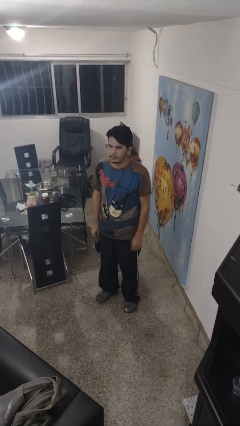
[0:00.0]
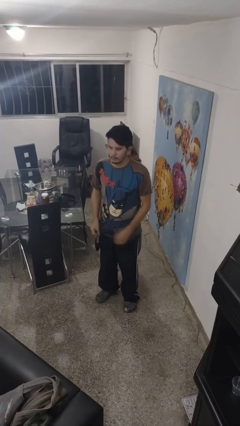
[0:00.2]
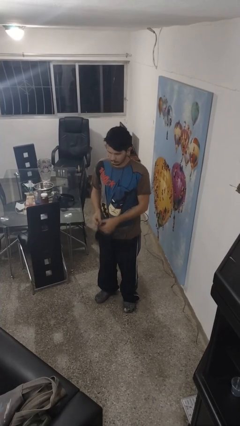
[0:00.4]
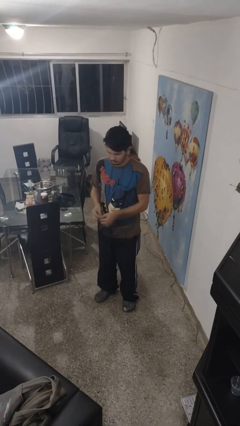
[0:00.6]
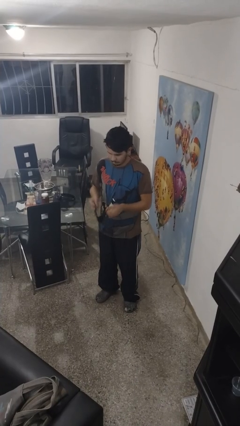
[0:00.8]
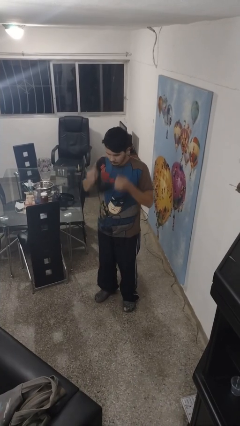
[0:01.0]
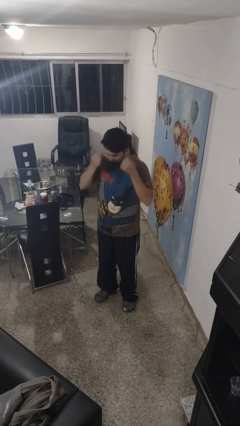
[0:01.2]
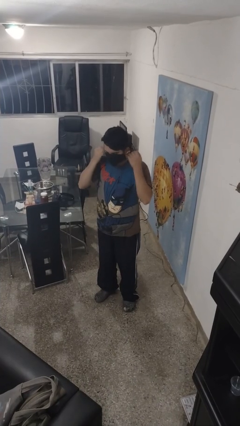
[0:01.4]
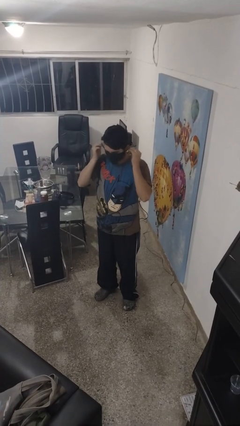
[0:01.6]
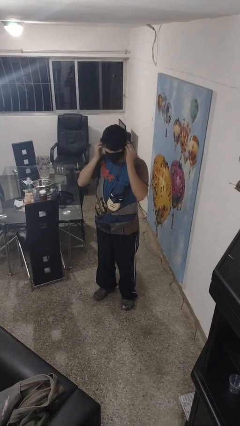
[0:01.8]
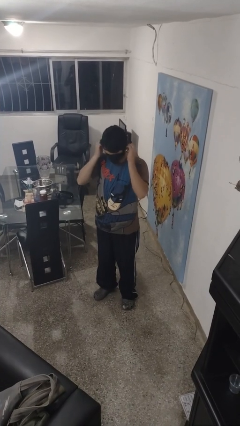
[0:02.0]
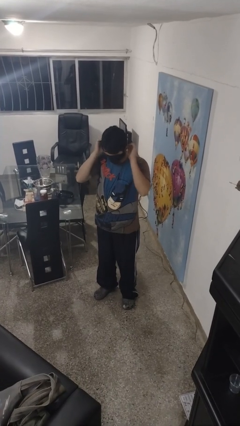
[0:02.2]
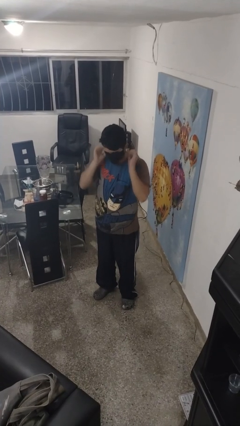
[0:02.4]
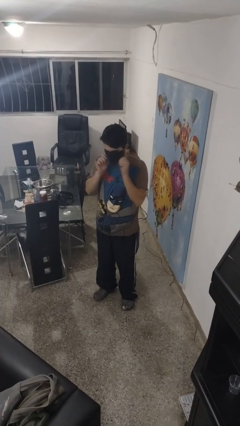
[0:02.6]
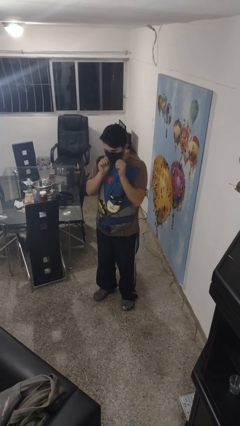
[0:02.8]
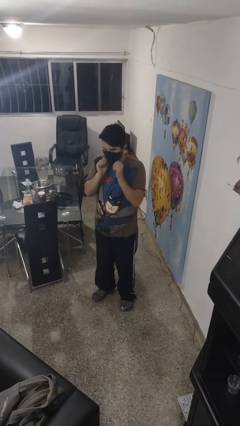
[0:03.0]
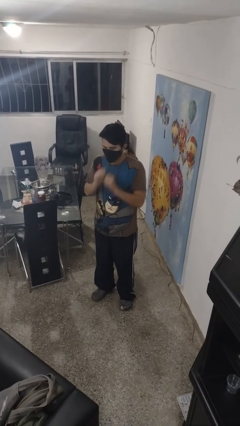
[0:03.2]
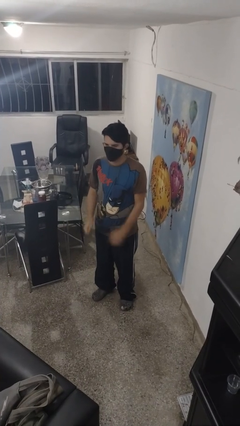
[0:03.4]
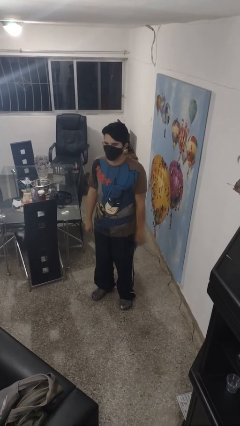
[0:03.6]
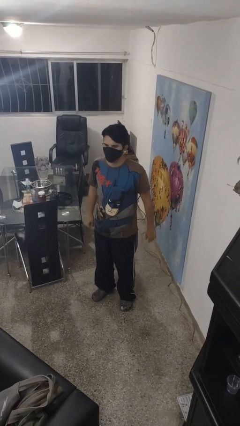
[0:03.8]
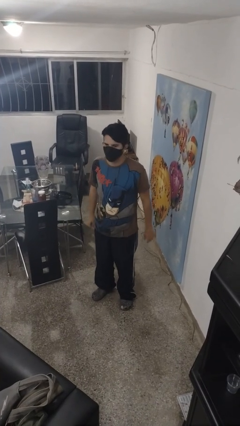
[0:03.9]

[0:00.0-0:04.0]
person puts on facemask

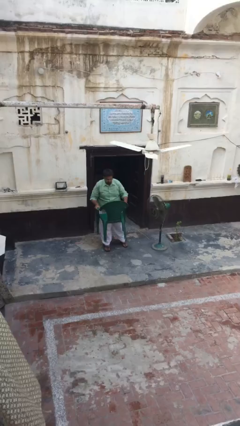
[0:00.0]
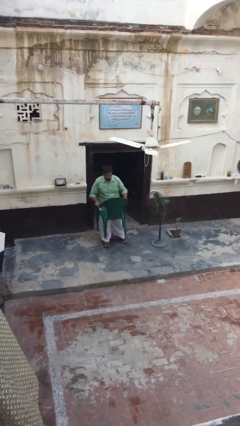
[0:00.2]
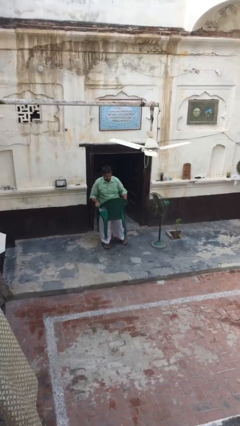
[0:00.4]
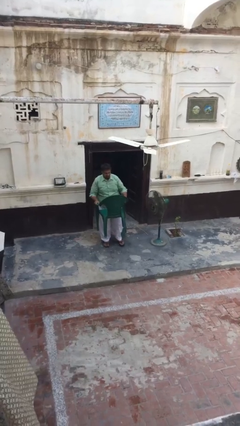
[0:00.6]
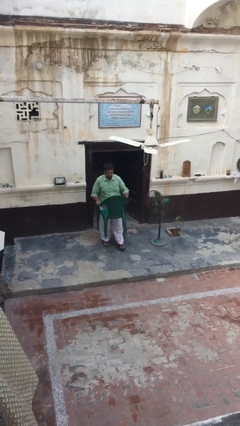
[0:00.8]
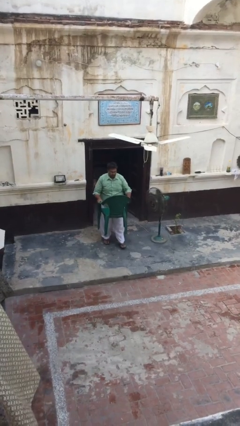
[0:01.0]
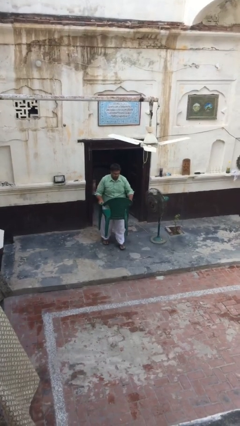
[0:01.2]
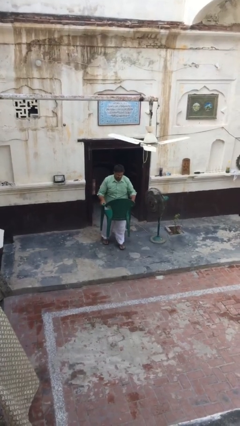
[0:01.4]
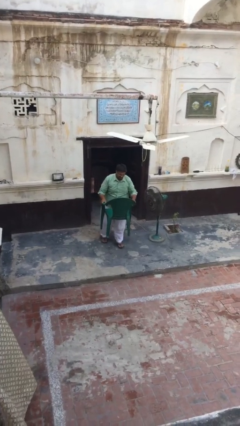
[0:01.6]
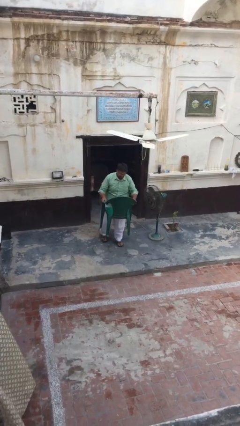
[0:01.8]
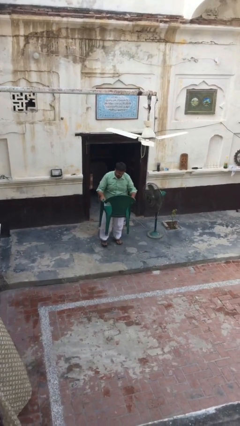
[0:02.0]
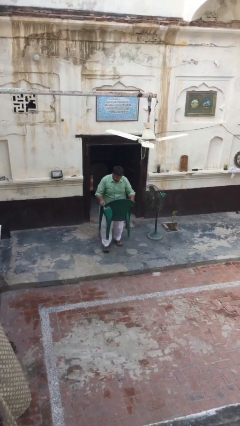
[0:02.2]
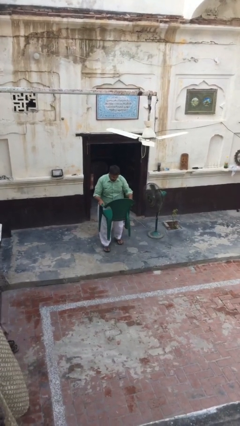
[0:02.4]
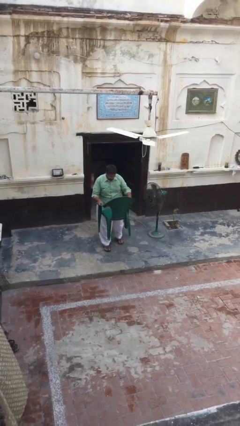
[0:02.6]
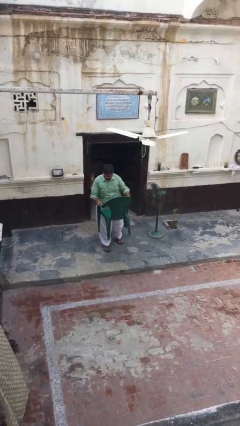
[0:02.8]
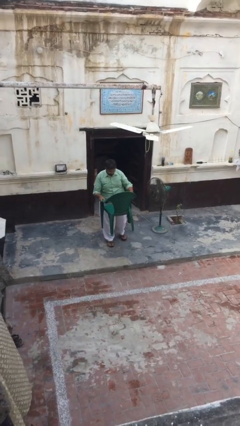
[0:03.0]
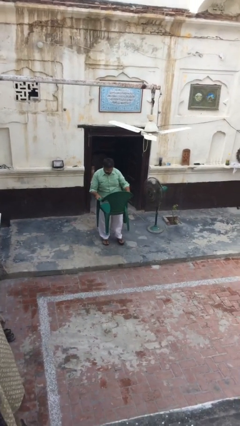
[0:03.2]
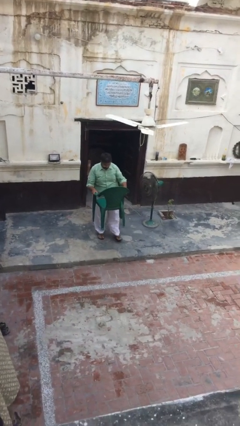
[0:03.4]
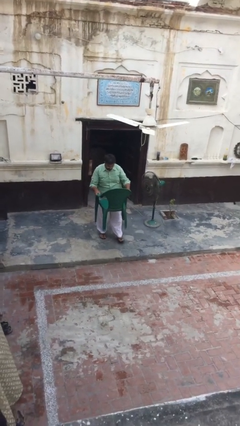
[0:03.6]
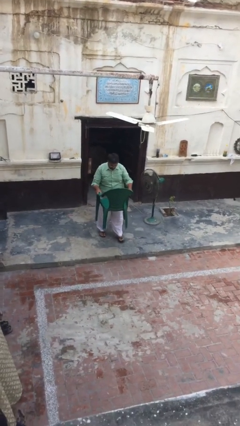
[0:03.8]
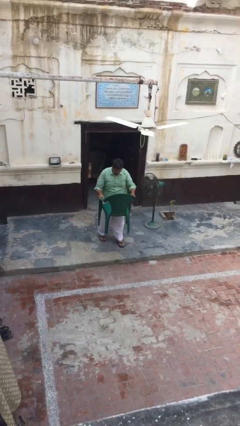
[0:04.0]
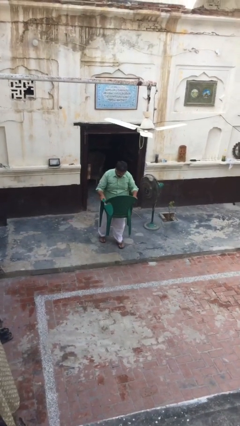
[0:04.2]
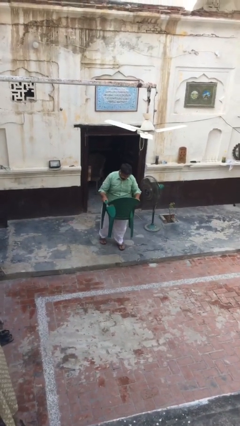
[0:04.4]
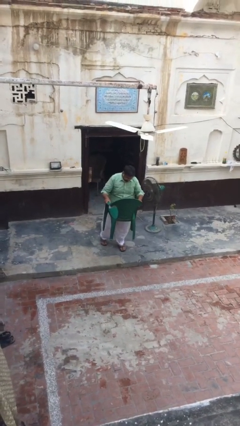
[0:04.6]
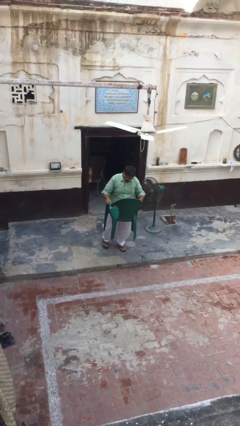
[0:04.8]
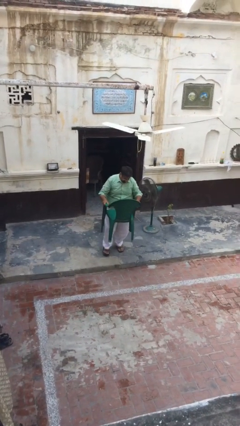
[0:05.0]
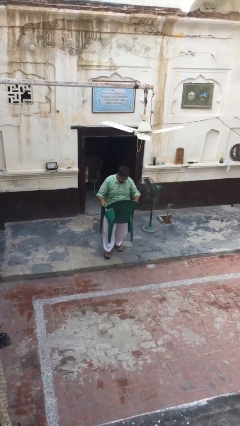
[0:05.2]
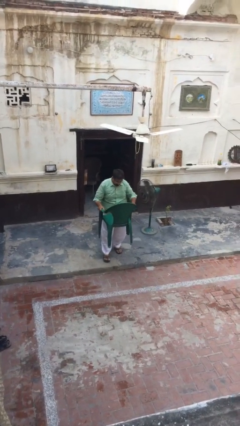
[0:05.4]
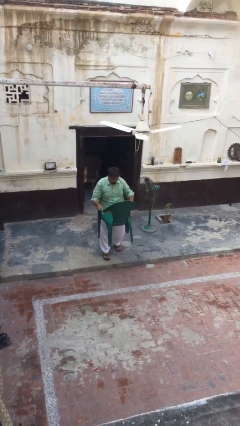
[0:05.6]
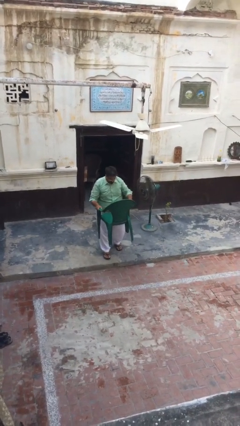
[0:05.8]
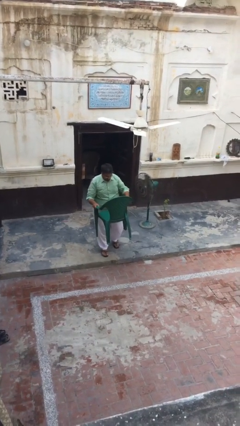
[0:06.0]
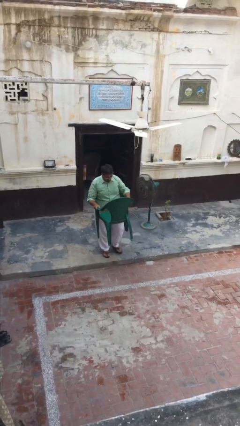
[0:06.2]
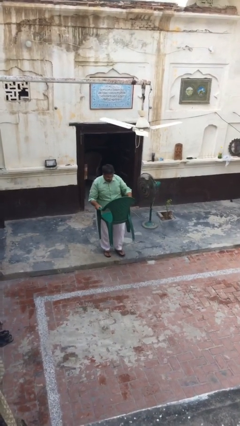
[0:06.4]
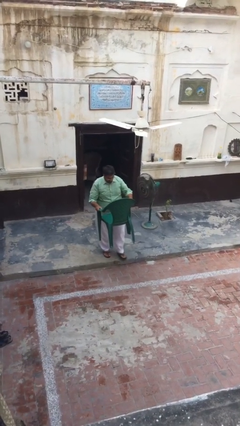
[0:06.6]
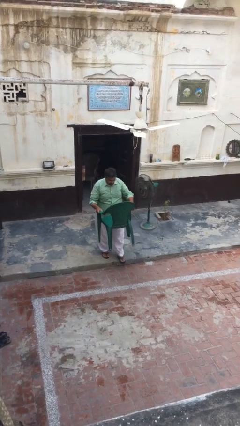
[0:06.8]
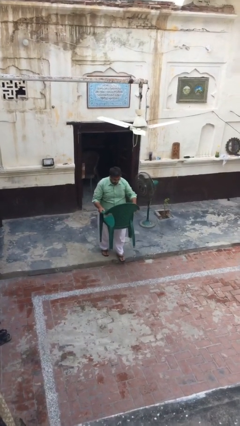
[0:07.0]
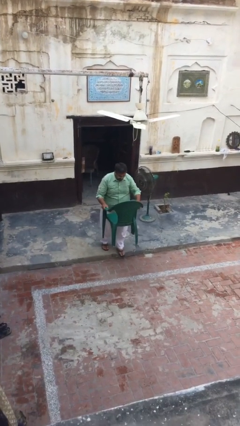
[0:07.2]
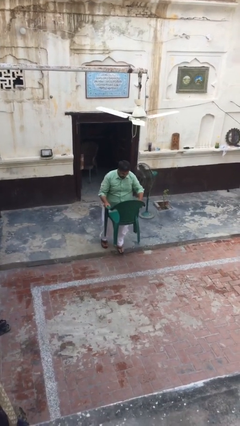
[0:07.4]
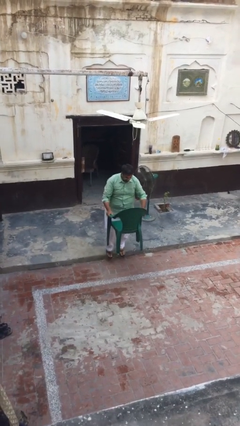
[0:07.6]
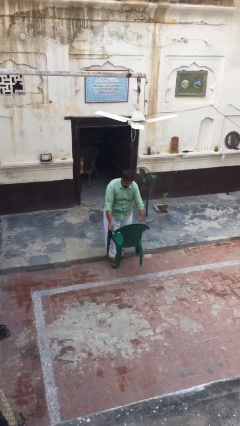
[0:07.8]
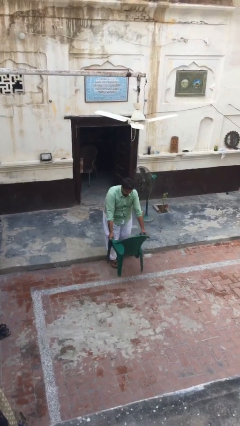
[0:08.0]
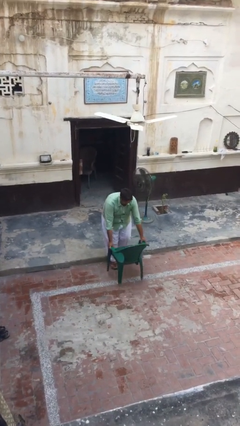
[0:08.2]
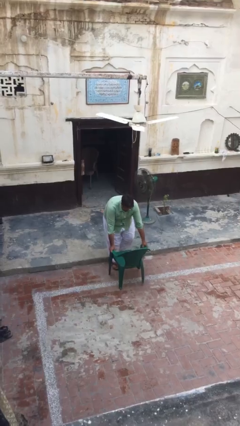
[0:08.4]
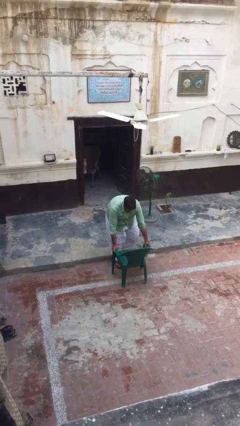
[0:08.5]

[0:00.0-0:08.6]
person carries heavy object

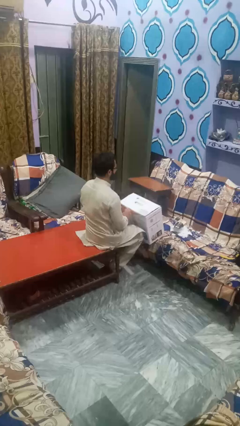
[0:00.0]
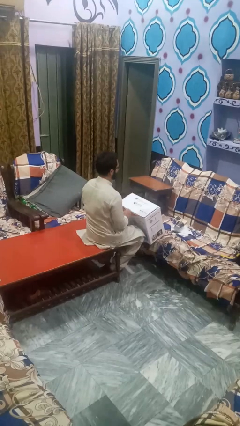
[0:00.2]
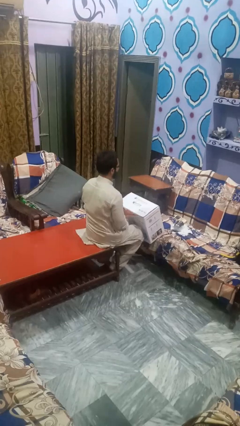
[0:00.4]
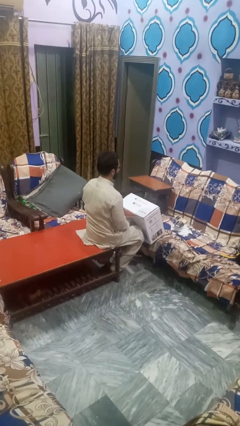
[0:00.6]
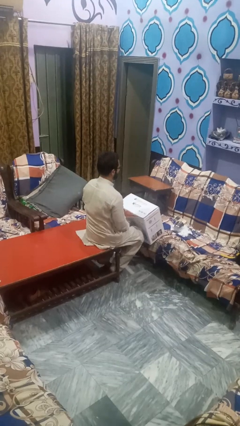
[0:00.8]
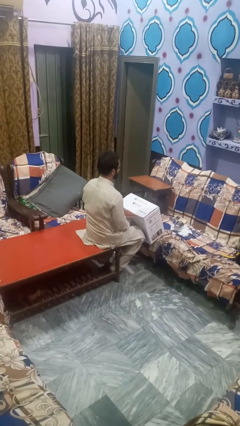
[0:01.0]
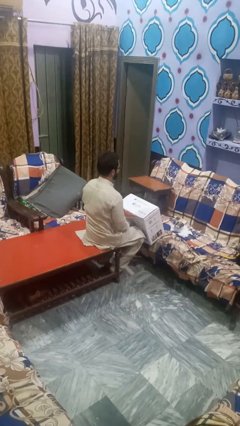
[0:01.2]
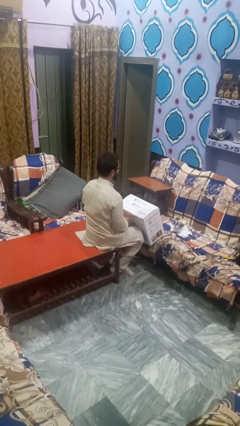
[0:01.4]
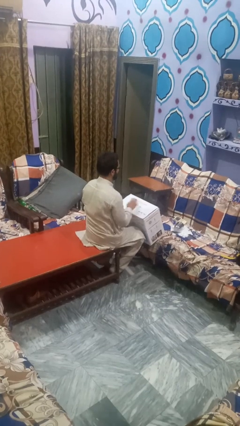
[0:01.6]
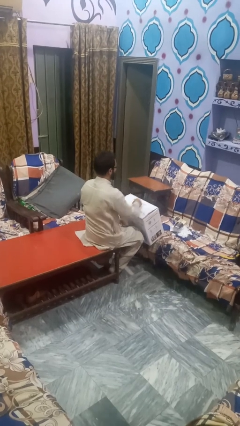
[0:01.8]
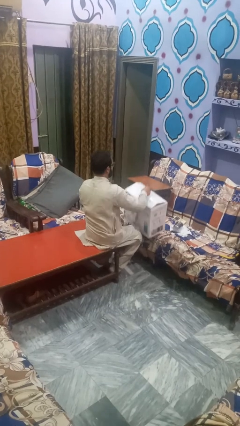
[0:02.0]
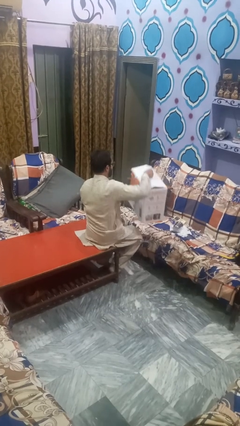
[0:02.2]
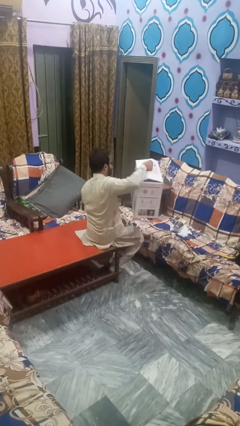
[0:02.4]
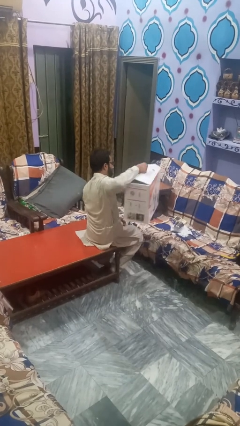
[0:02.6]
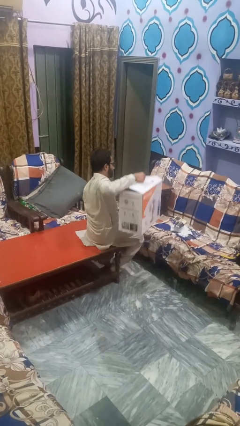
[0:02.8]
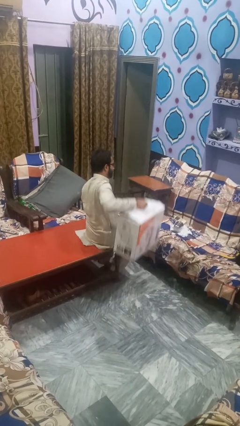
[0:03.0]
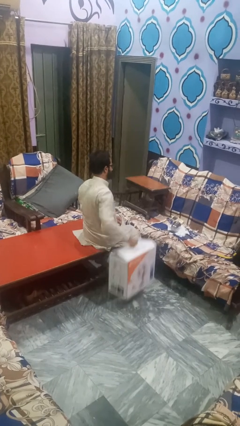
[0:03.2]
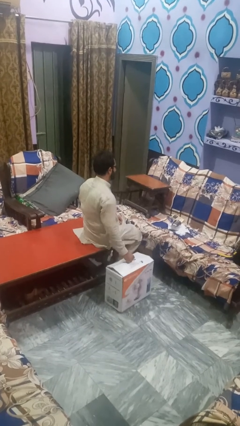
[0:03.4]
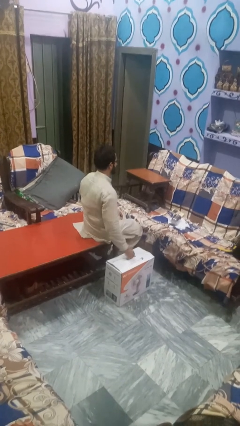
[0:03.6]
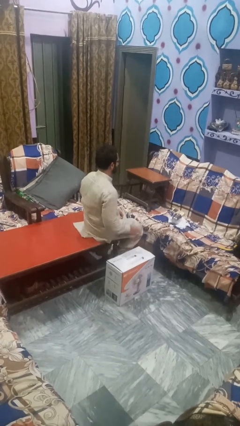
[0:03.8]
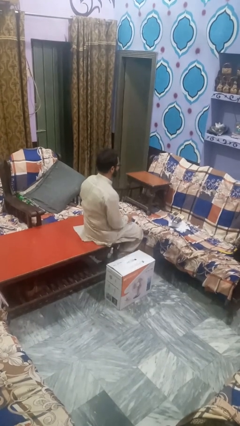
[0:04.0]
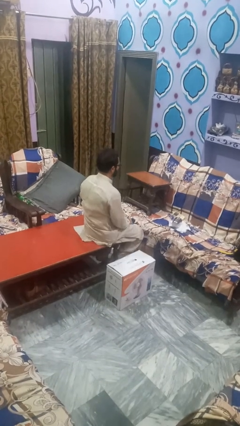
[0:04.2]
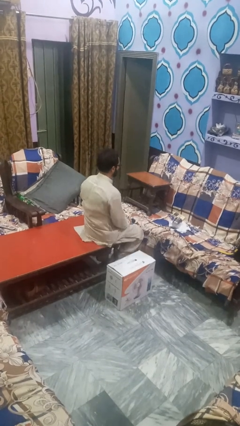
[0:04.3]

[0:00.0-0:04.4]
person unloads box onto floor

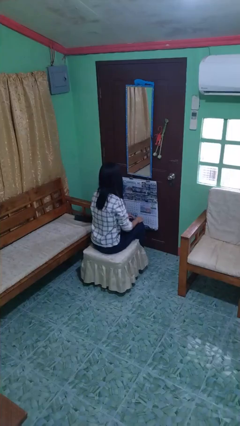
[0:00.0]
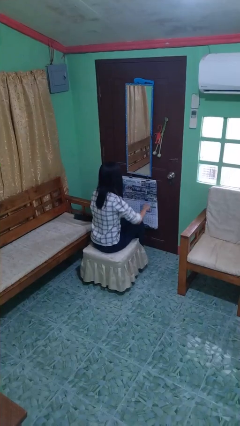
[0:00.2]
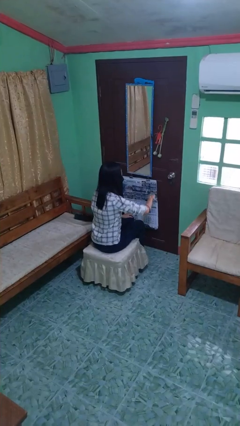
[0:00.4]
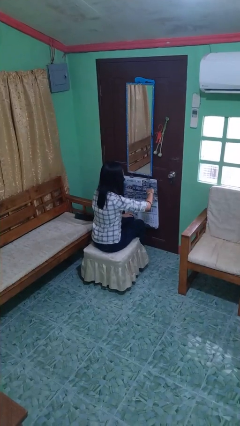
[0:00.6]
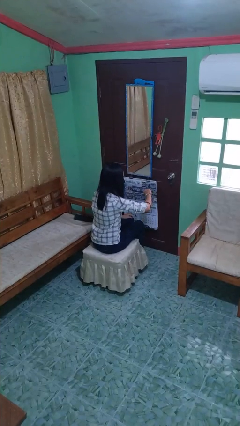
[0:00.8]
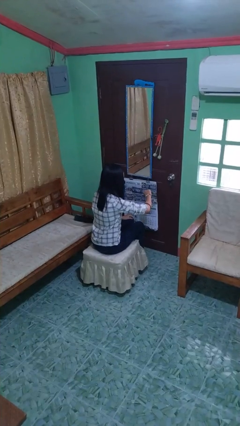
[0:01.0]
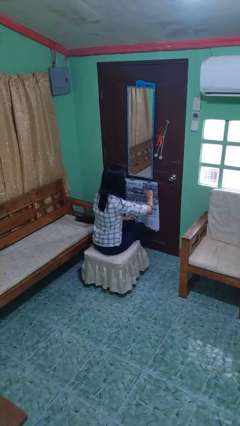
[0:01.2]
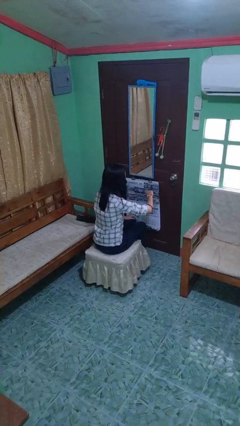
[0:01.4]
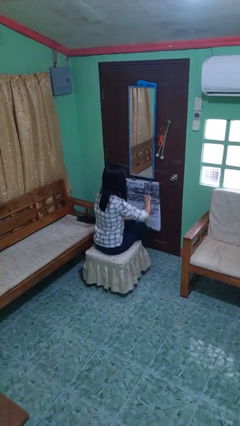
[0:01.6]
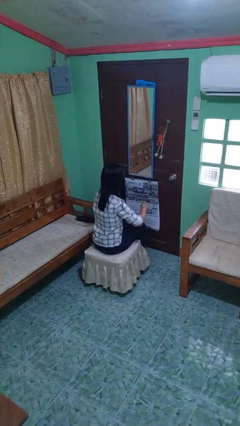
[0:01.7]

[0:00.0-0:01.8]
person looks at wristwatch
